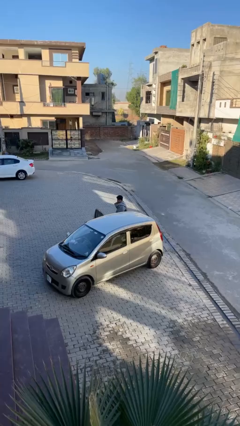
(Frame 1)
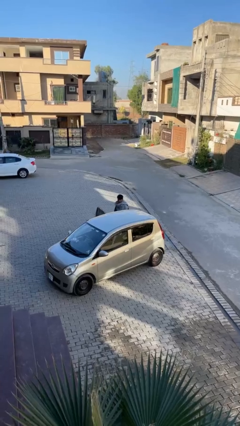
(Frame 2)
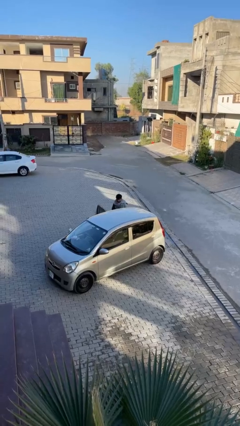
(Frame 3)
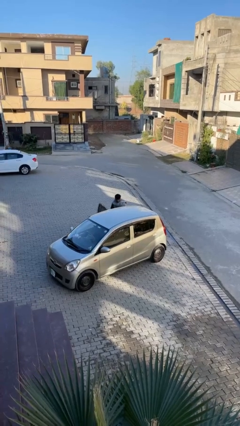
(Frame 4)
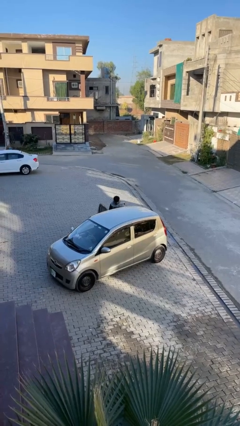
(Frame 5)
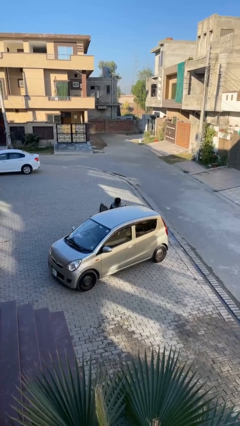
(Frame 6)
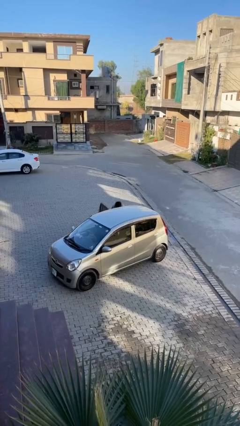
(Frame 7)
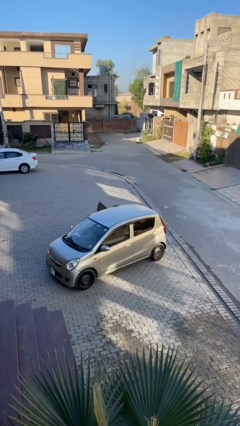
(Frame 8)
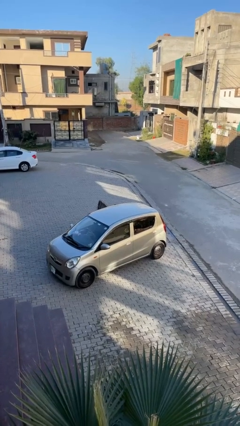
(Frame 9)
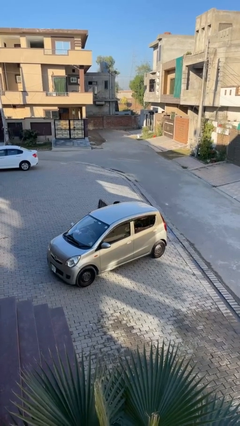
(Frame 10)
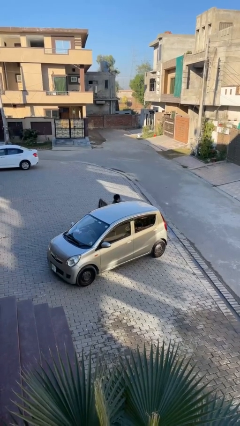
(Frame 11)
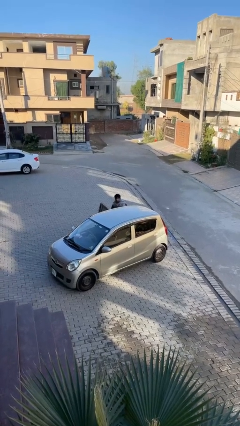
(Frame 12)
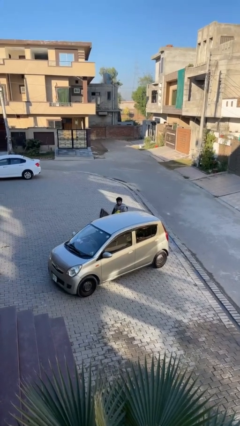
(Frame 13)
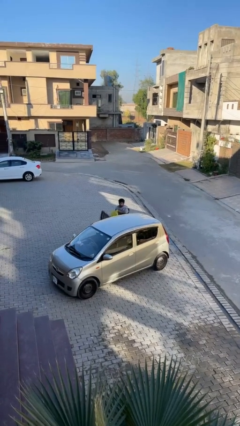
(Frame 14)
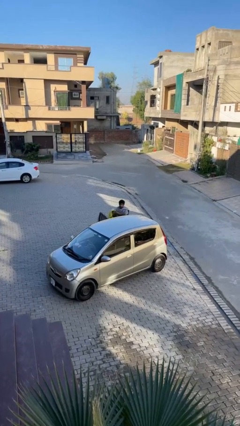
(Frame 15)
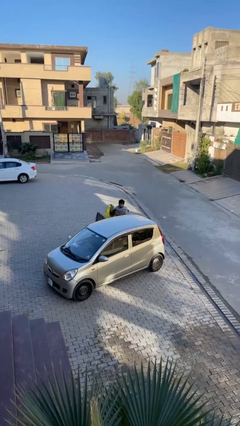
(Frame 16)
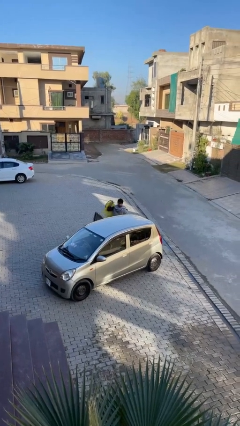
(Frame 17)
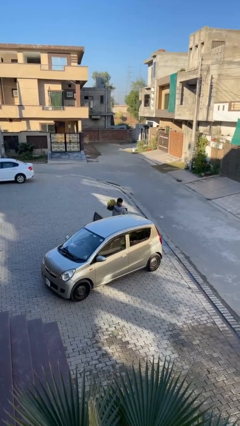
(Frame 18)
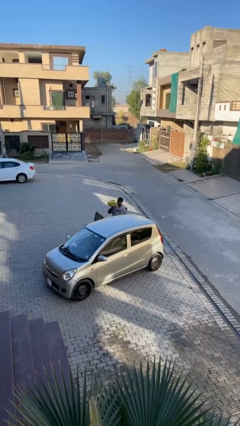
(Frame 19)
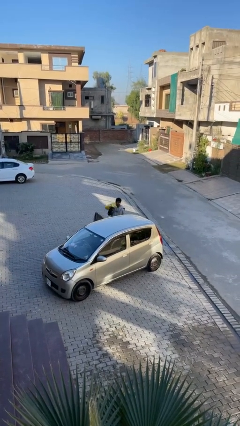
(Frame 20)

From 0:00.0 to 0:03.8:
person unloads car

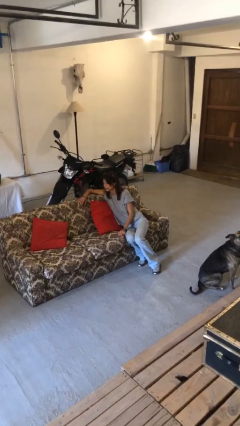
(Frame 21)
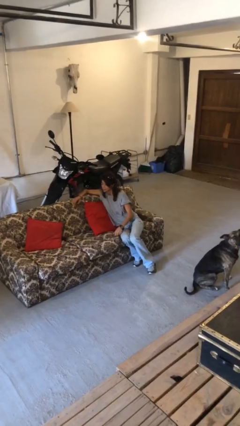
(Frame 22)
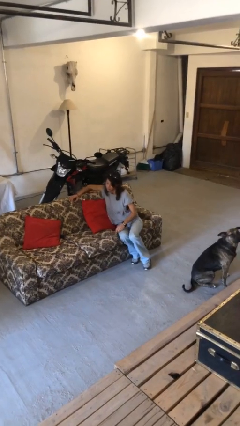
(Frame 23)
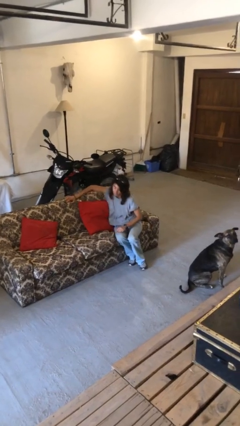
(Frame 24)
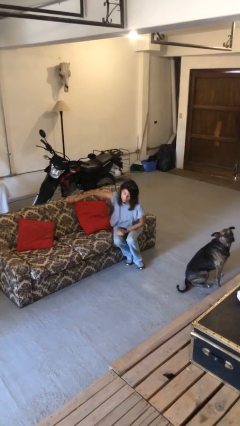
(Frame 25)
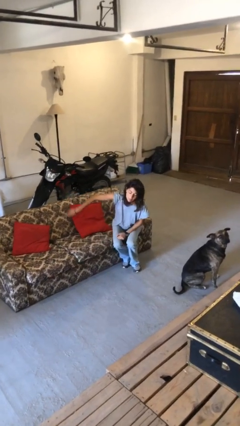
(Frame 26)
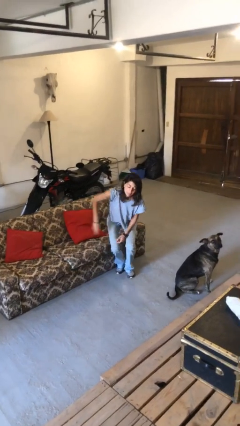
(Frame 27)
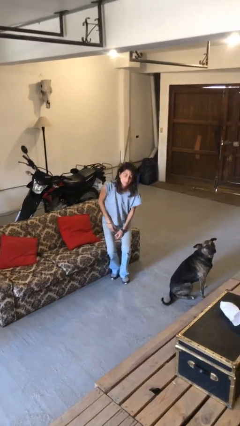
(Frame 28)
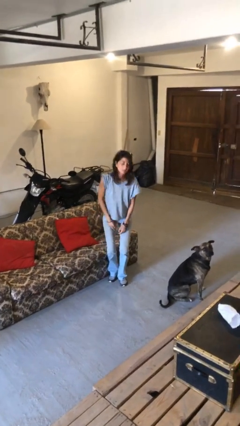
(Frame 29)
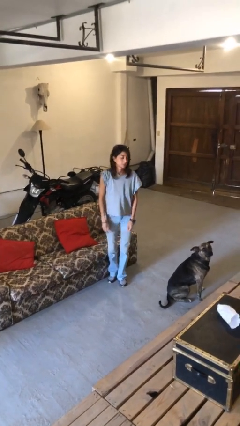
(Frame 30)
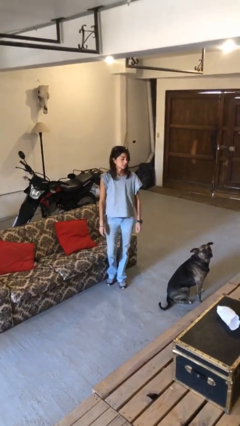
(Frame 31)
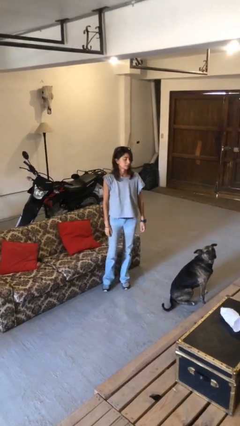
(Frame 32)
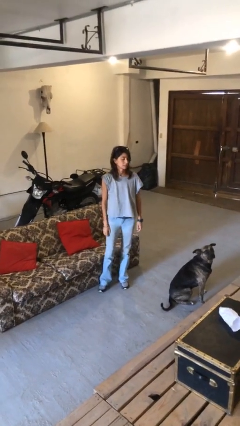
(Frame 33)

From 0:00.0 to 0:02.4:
person stands up

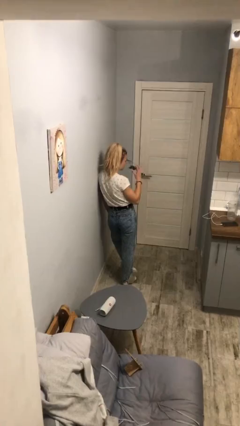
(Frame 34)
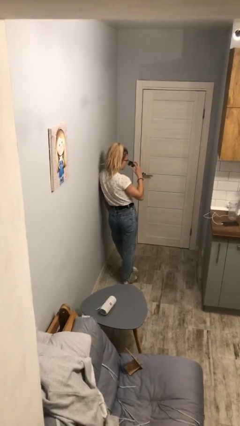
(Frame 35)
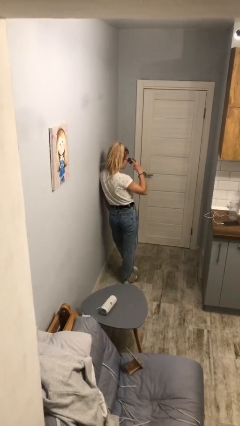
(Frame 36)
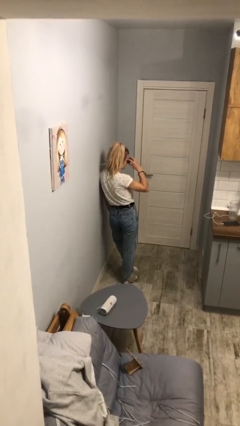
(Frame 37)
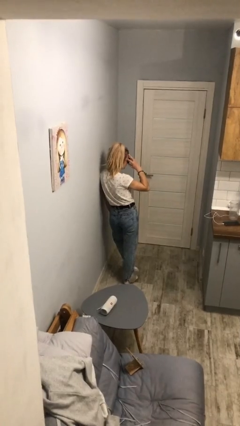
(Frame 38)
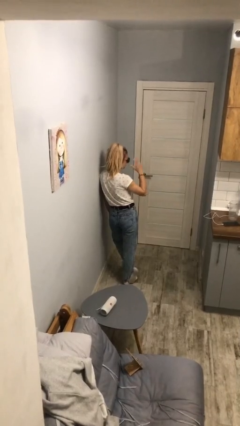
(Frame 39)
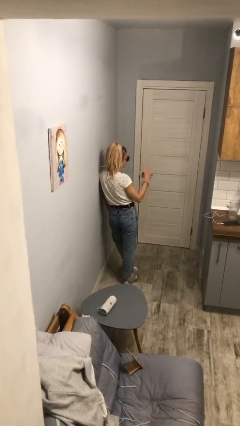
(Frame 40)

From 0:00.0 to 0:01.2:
person puts on glasses

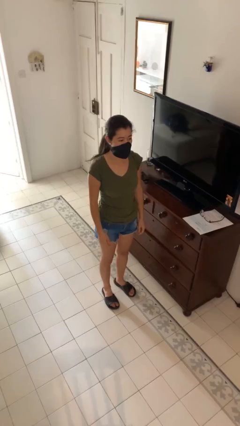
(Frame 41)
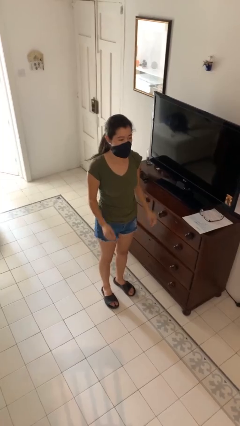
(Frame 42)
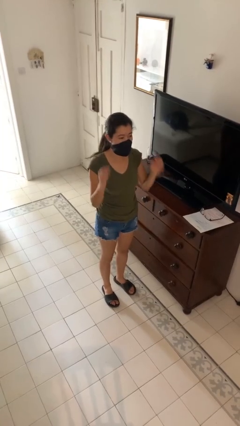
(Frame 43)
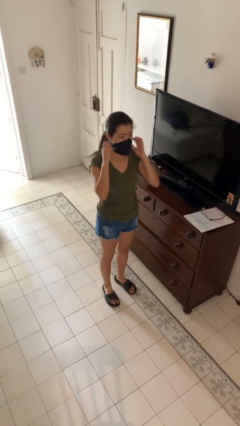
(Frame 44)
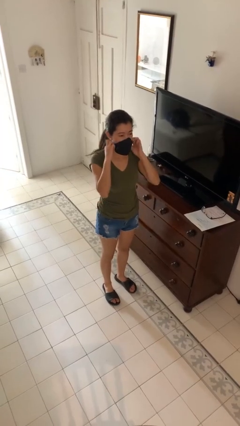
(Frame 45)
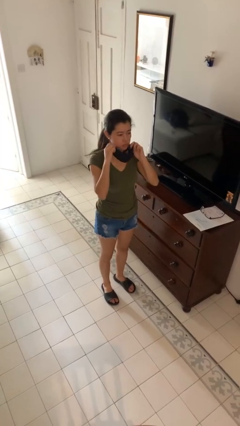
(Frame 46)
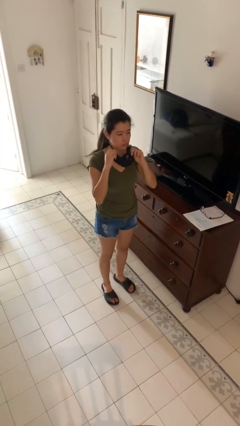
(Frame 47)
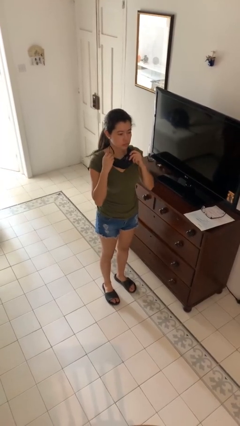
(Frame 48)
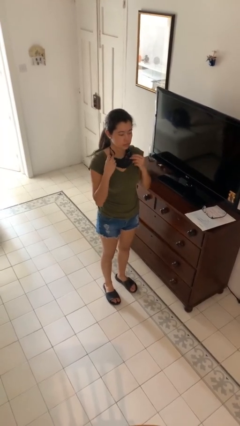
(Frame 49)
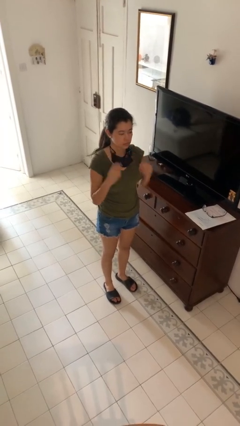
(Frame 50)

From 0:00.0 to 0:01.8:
person takes off facemask

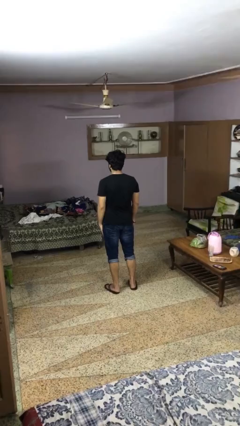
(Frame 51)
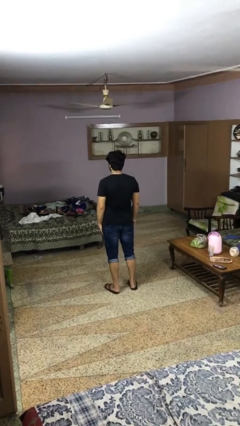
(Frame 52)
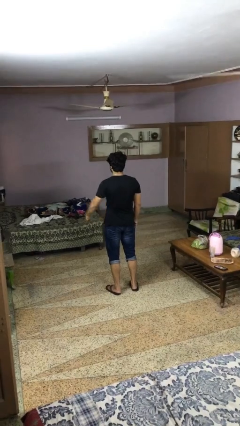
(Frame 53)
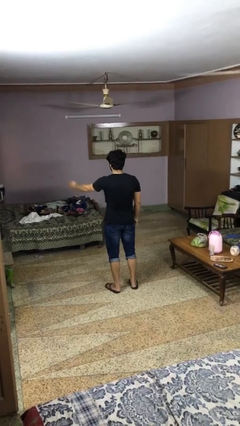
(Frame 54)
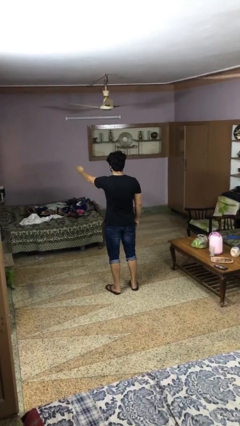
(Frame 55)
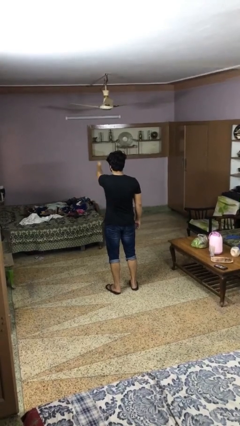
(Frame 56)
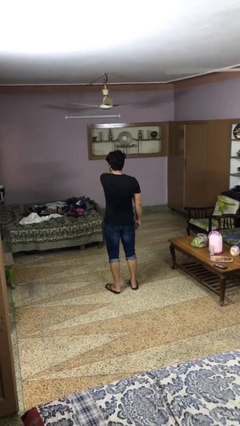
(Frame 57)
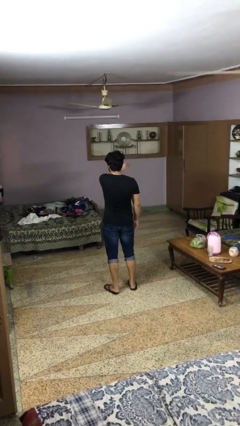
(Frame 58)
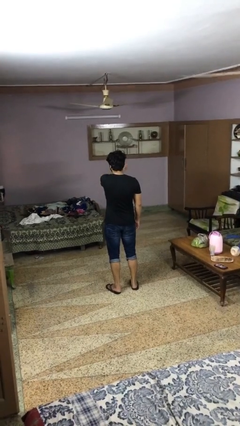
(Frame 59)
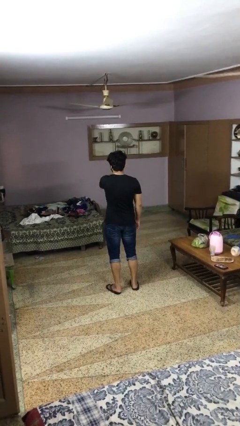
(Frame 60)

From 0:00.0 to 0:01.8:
person gestures swipe right

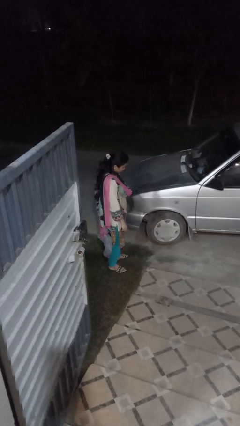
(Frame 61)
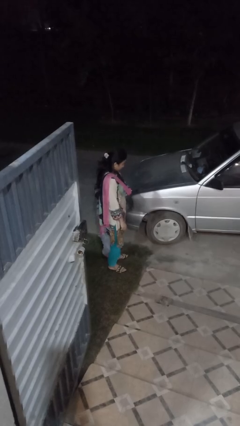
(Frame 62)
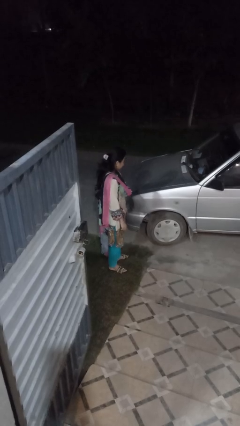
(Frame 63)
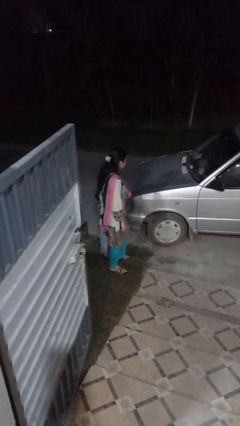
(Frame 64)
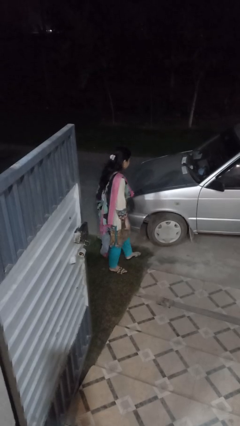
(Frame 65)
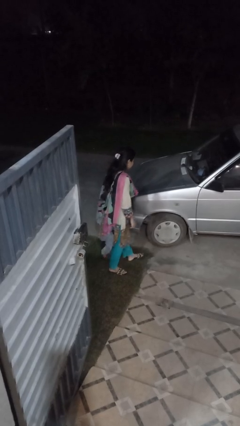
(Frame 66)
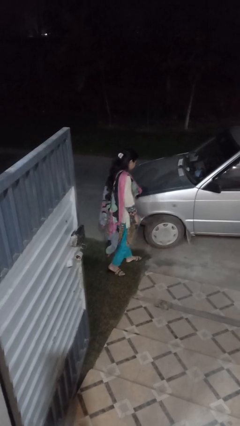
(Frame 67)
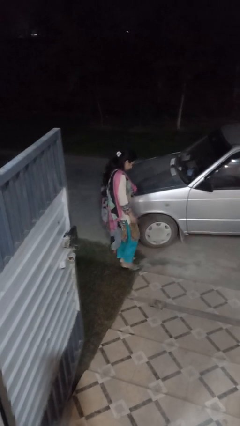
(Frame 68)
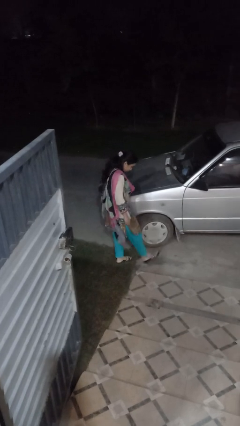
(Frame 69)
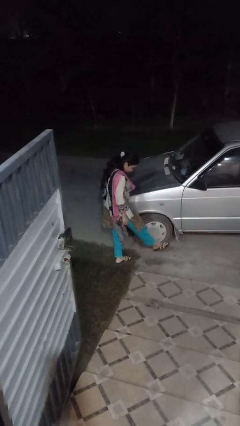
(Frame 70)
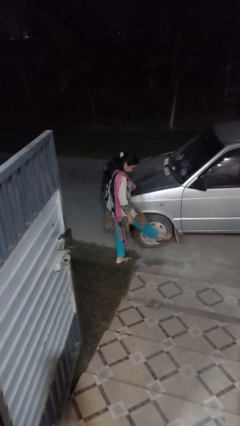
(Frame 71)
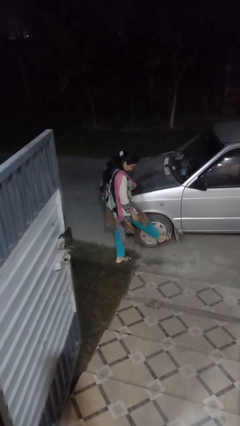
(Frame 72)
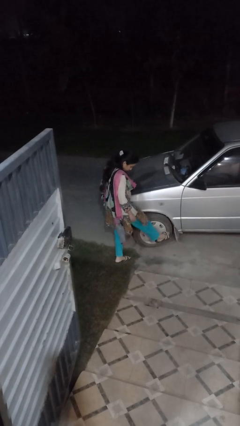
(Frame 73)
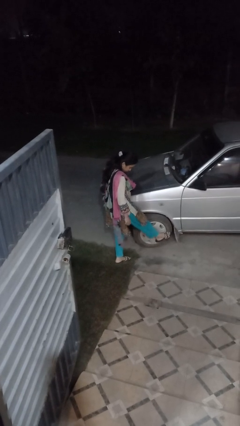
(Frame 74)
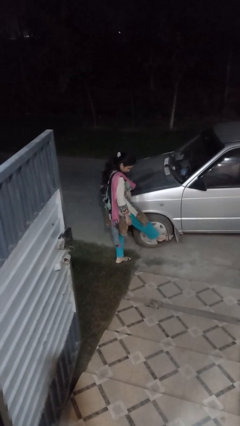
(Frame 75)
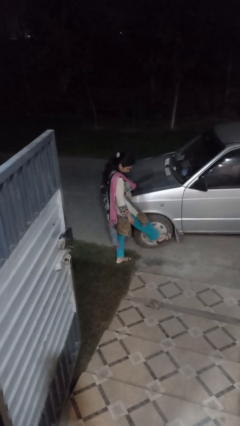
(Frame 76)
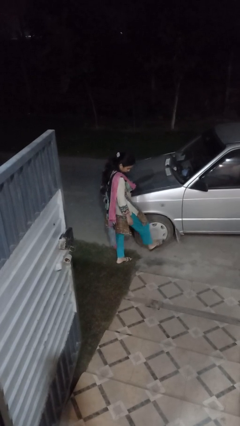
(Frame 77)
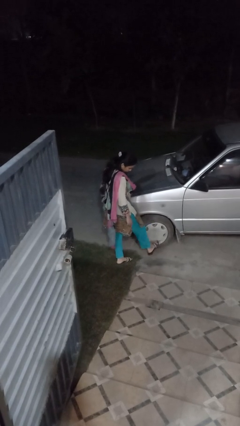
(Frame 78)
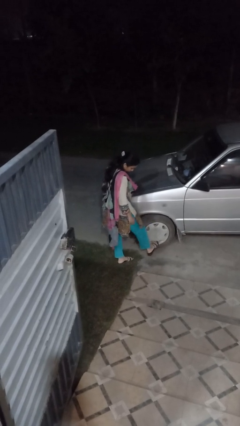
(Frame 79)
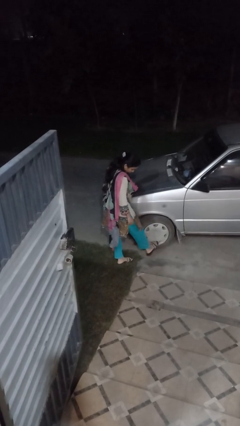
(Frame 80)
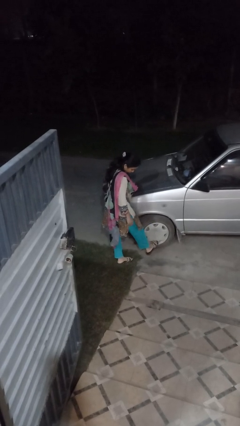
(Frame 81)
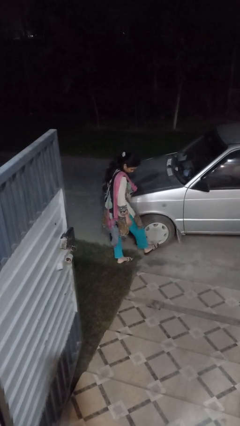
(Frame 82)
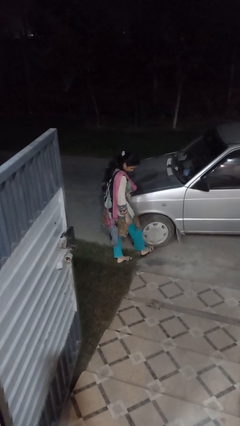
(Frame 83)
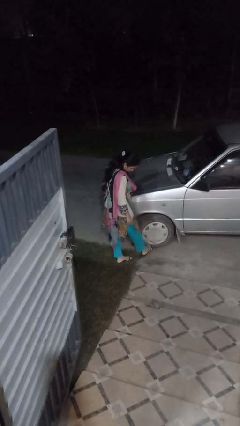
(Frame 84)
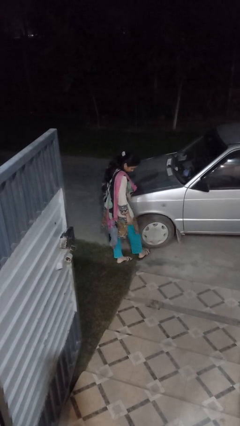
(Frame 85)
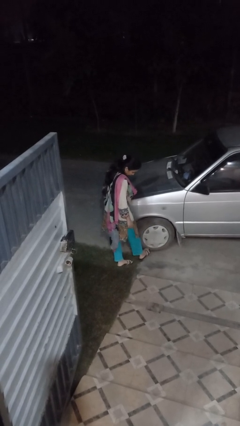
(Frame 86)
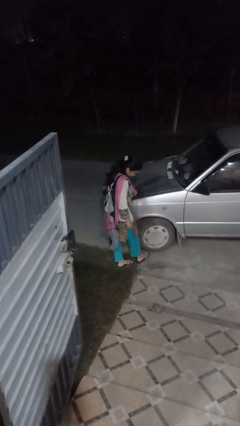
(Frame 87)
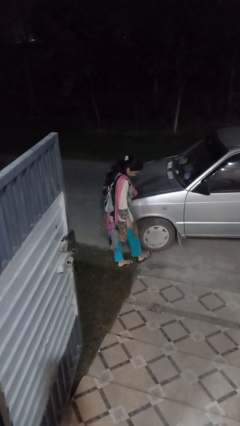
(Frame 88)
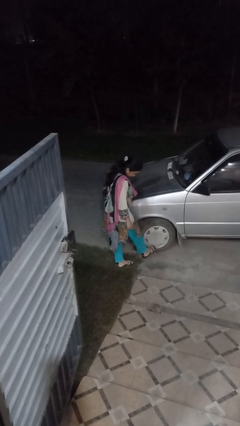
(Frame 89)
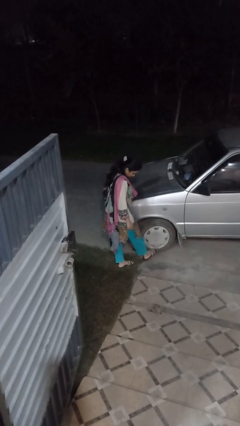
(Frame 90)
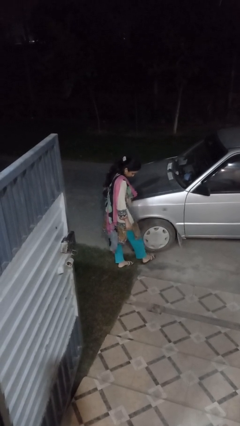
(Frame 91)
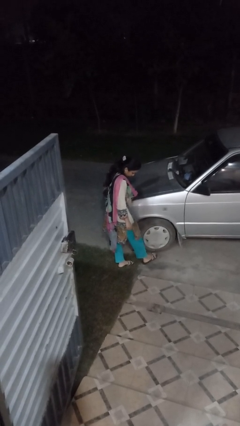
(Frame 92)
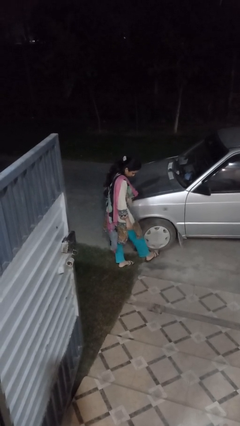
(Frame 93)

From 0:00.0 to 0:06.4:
person kicks car tires
